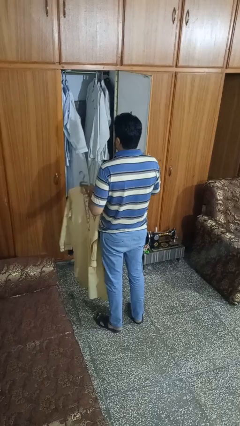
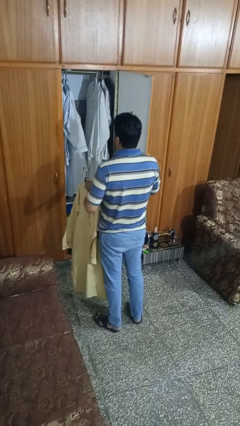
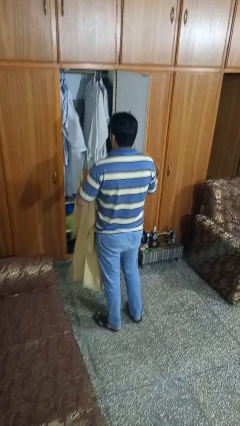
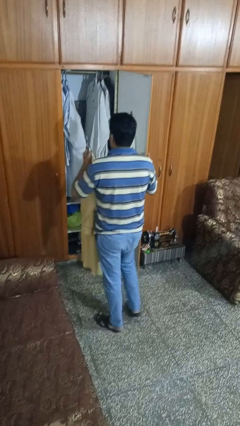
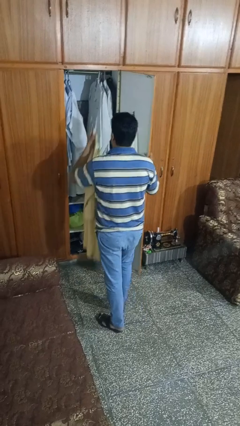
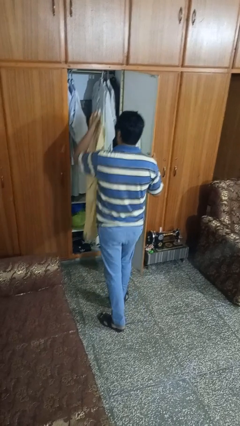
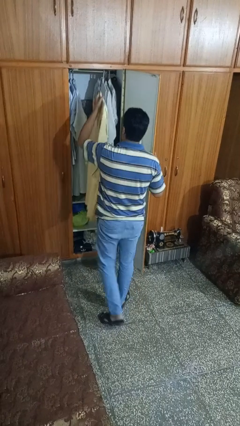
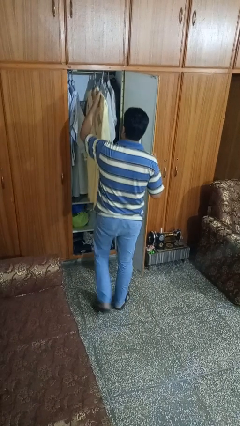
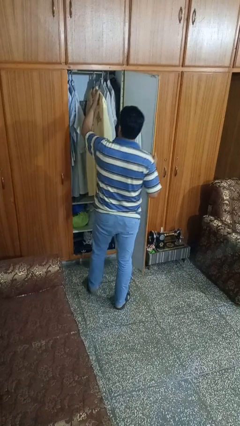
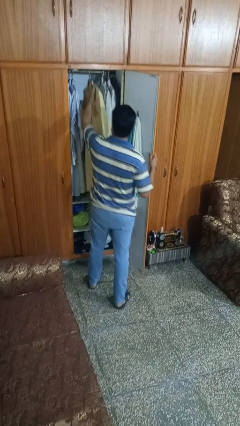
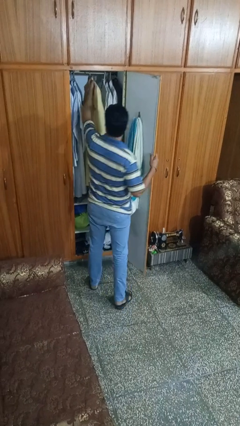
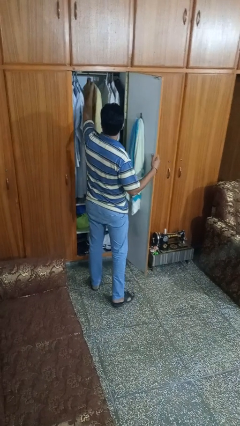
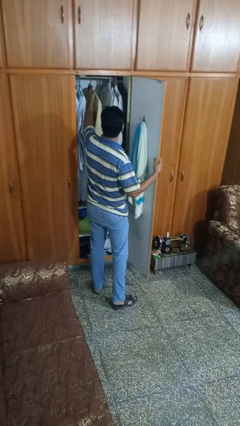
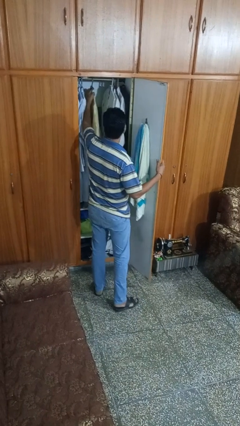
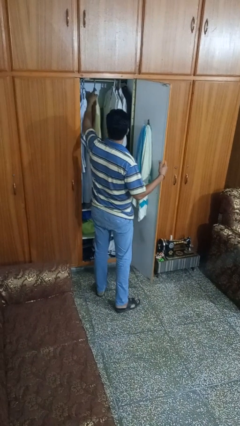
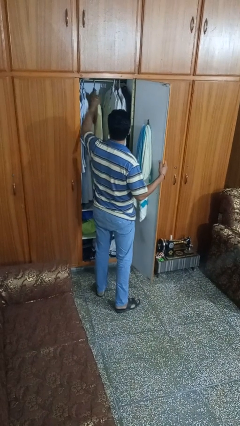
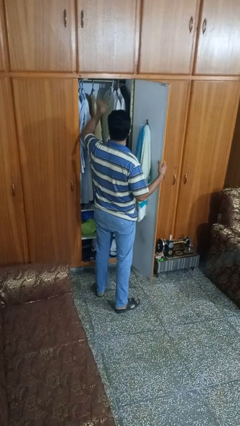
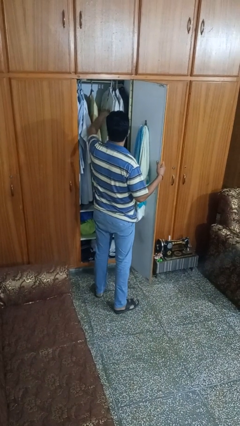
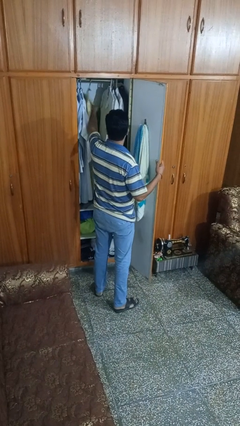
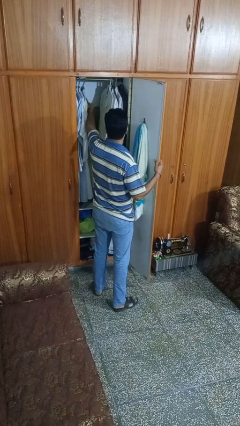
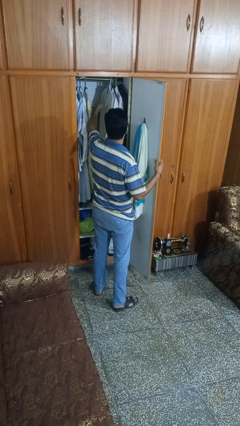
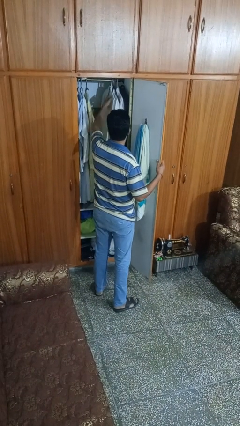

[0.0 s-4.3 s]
person puts clothes into dresser

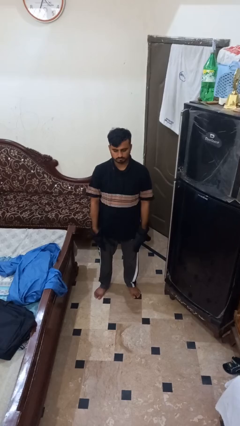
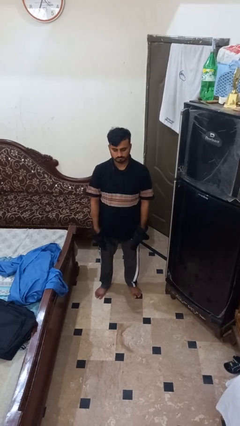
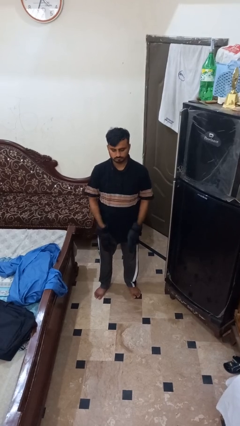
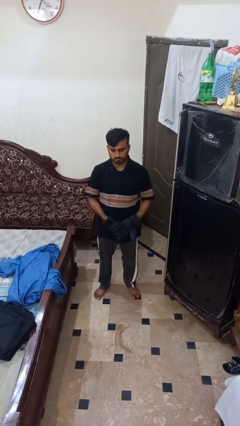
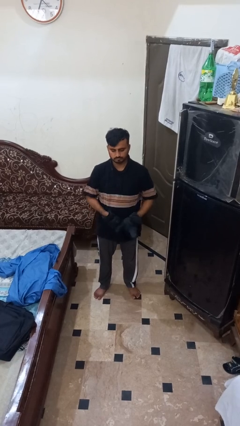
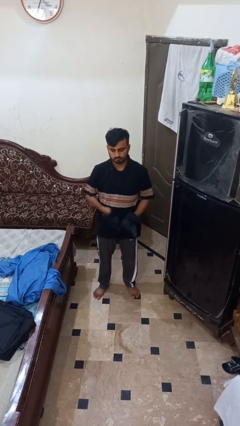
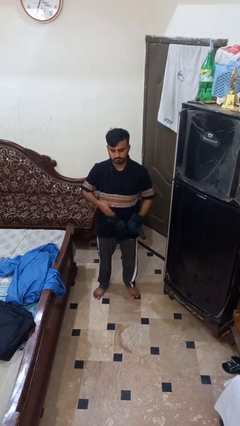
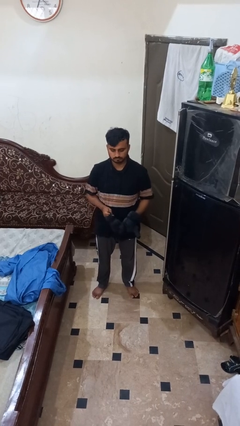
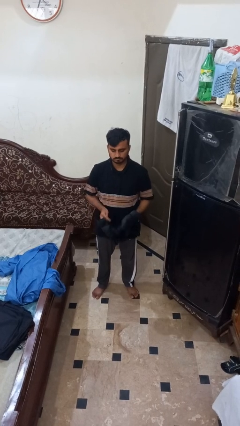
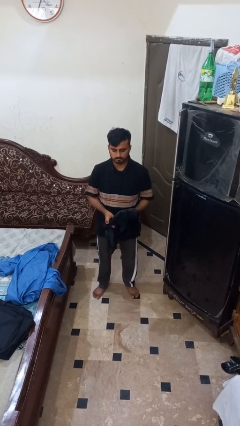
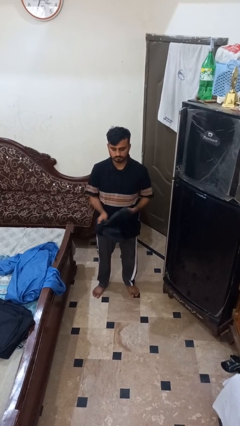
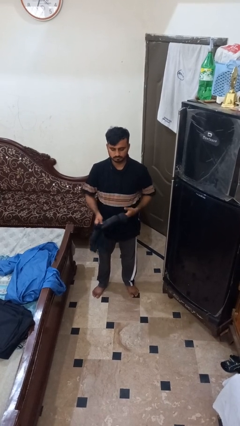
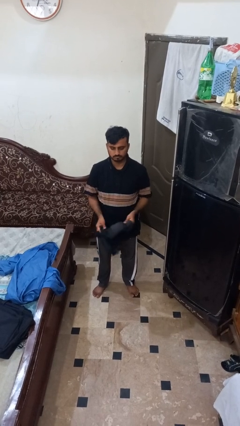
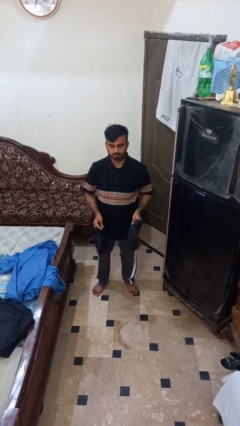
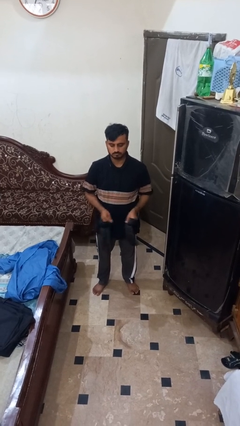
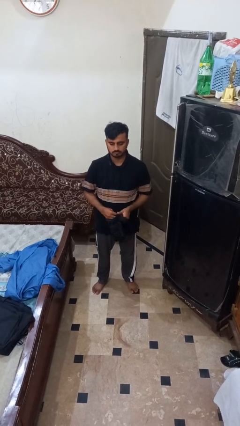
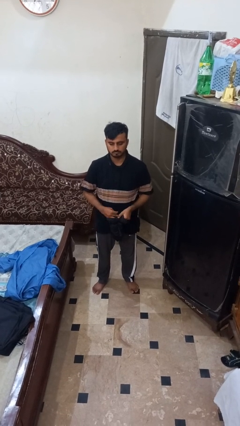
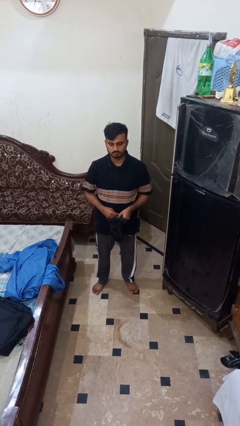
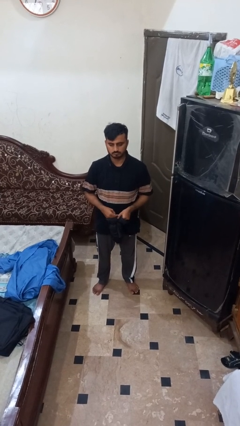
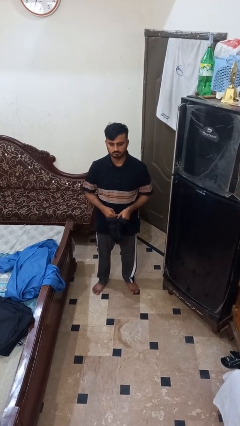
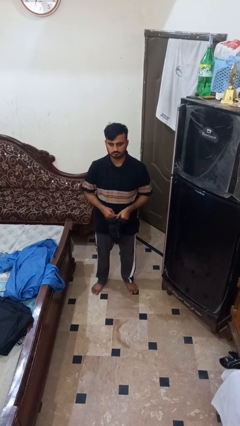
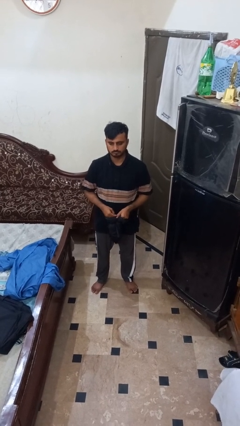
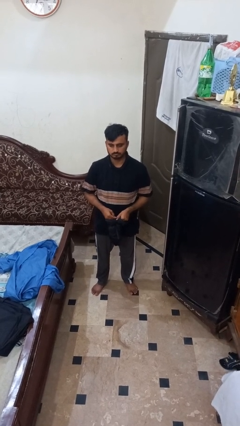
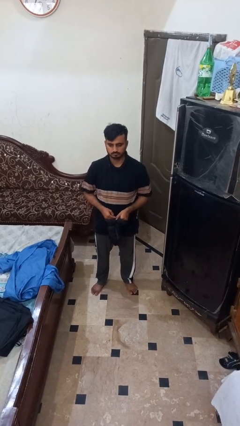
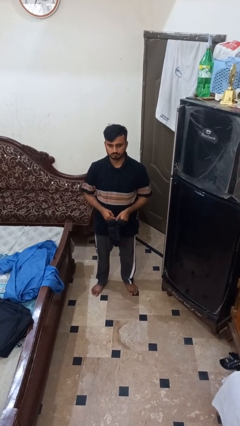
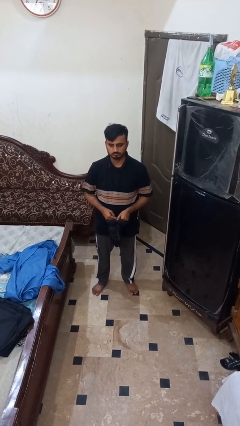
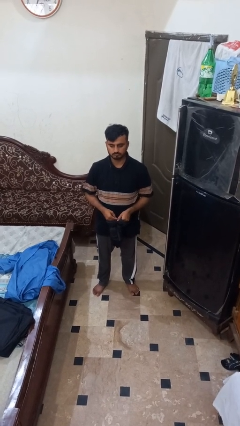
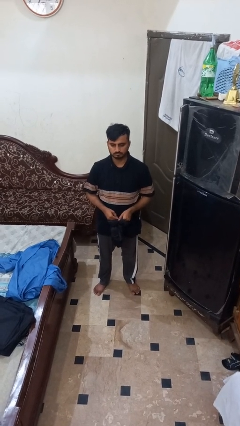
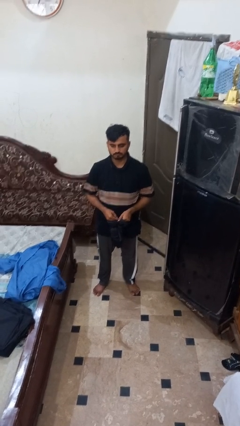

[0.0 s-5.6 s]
person takes off gloves

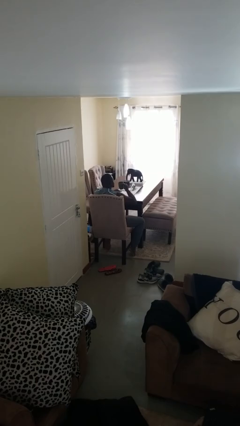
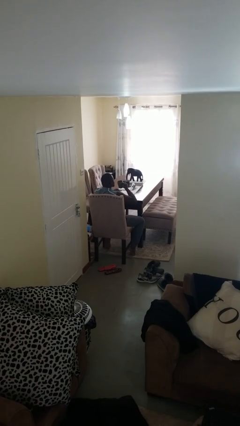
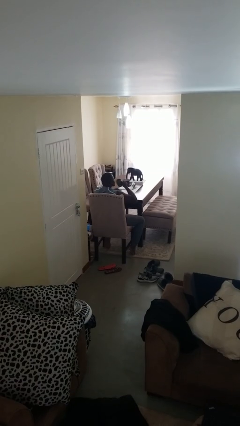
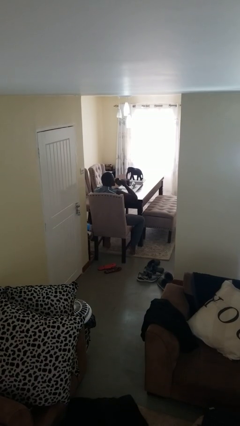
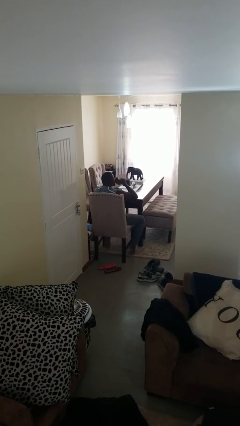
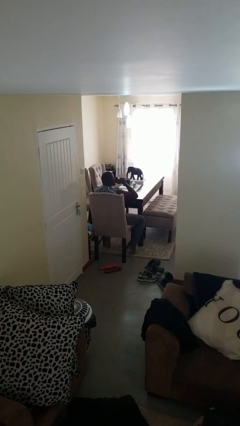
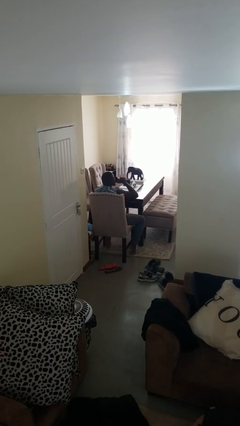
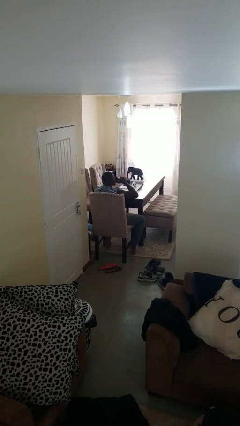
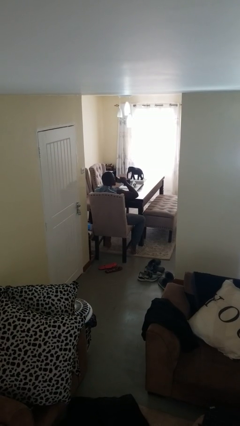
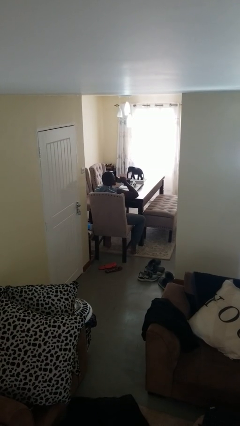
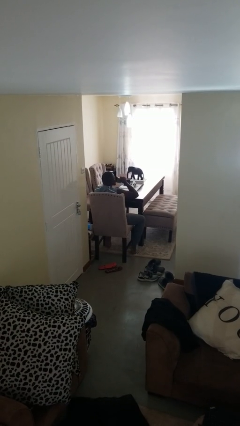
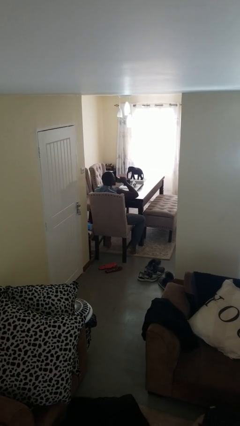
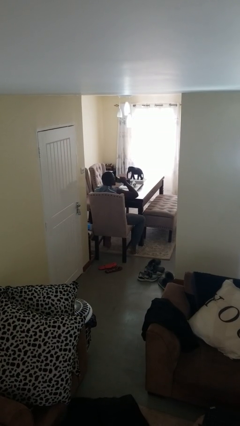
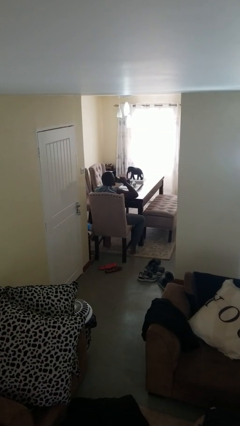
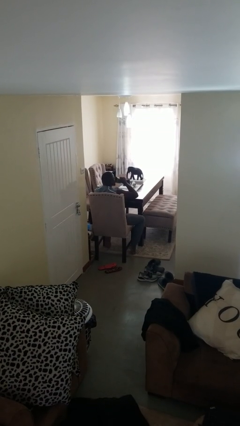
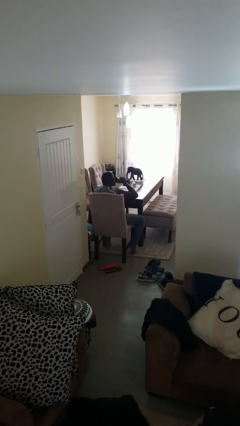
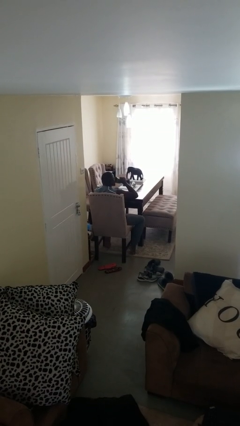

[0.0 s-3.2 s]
person drinks from mug

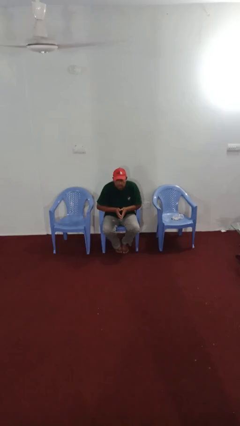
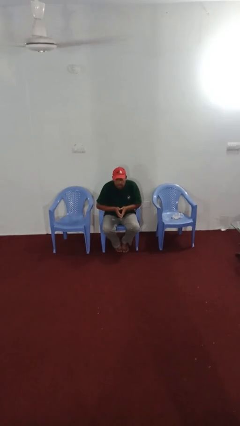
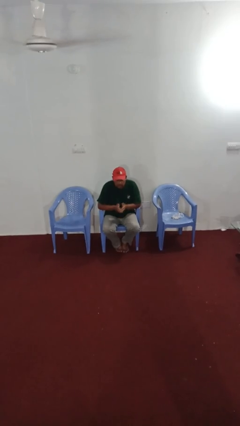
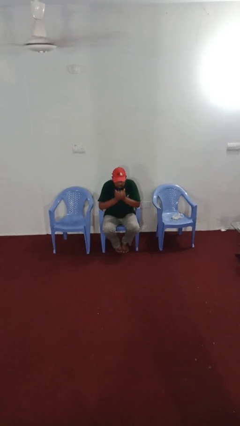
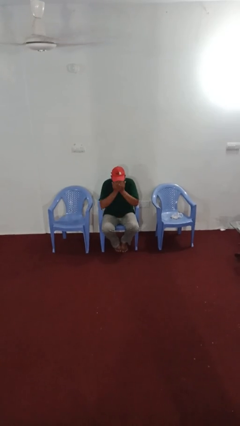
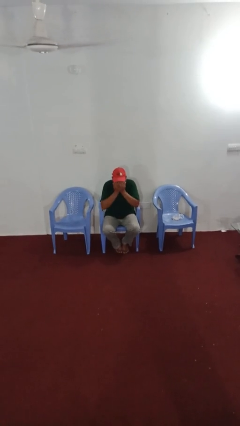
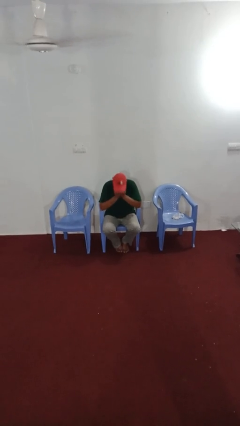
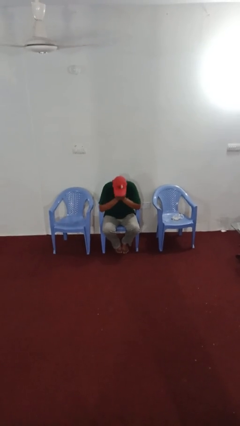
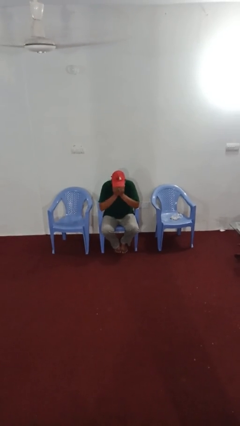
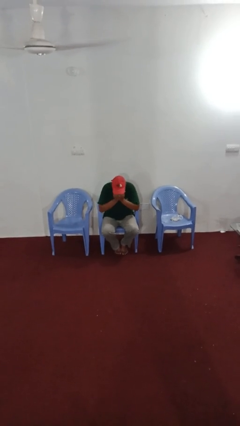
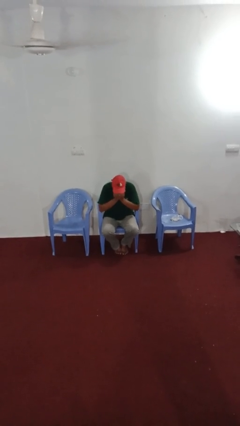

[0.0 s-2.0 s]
person sneezes into hand

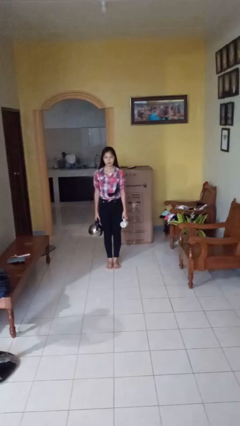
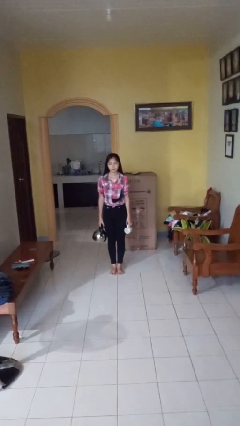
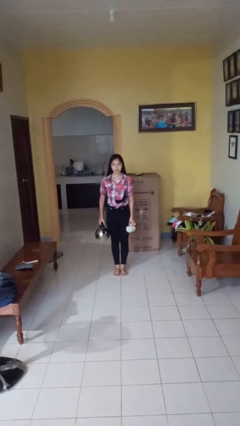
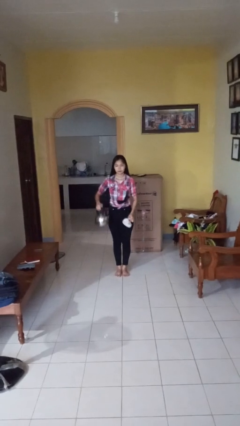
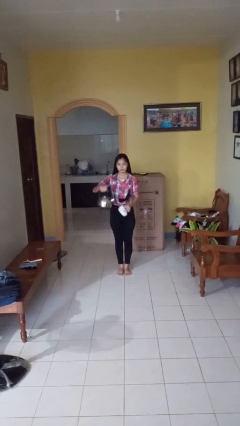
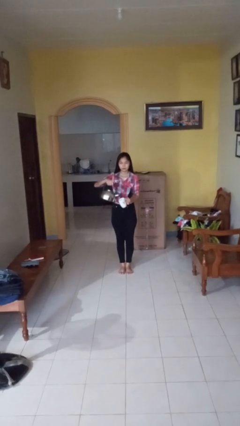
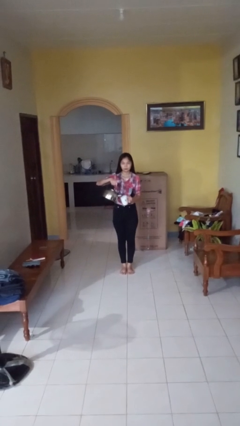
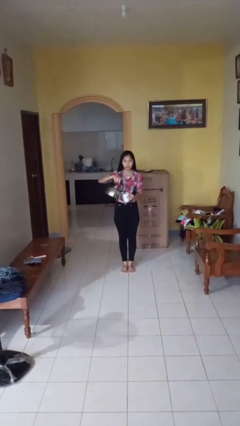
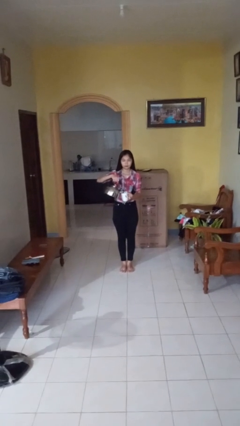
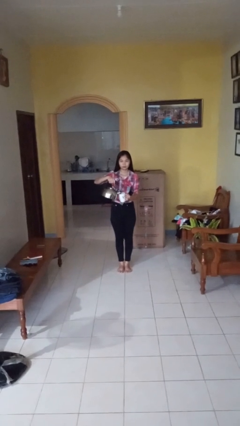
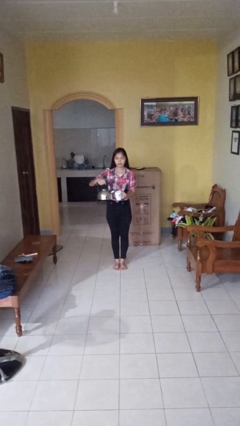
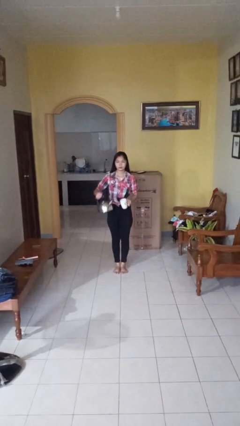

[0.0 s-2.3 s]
person pours coffee into mug

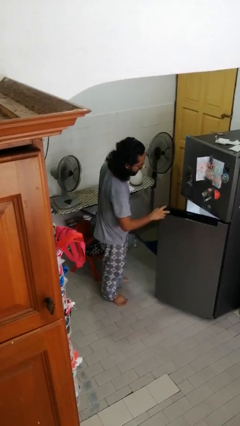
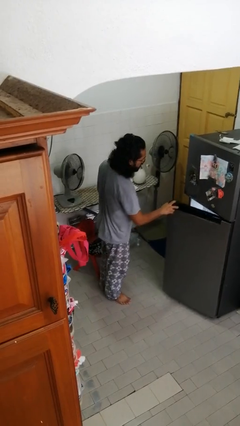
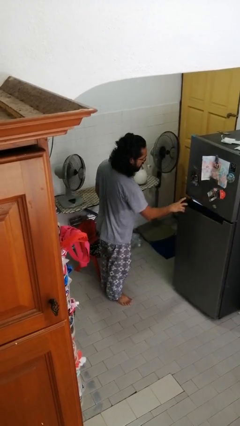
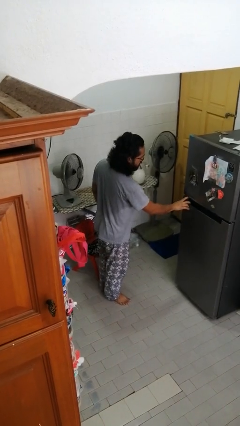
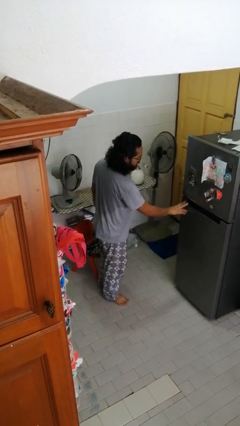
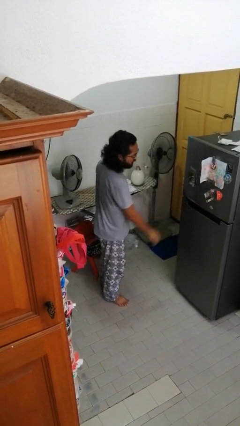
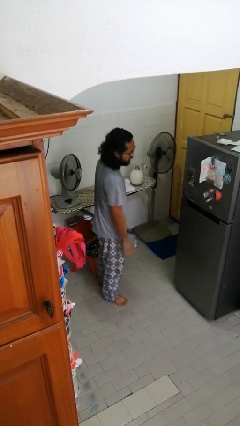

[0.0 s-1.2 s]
person closes refrigerator
